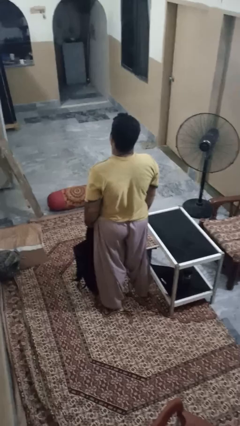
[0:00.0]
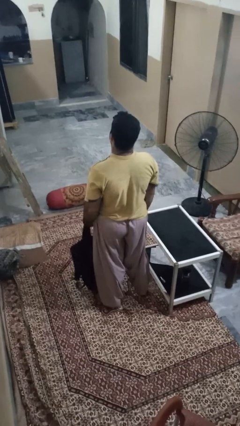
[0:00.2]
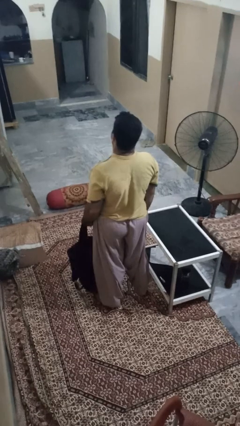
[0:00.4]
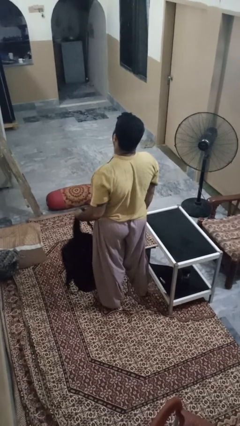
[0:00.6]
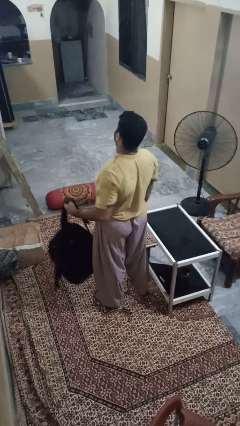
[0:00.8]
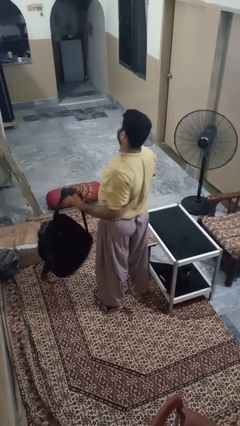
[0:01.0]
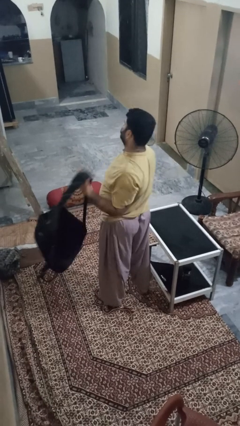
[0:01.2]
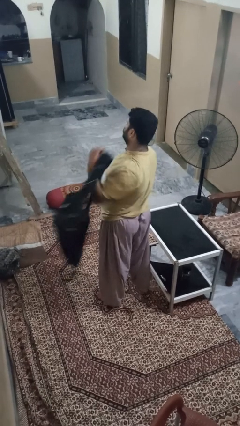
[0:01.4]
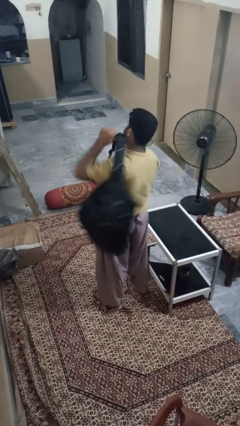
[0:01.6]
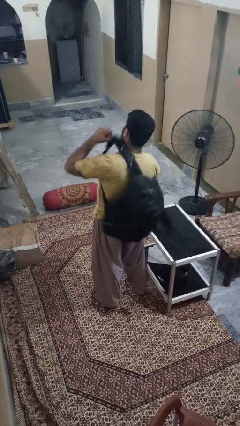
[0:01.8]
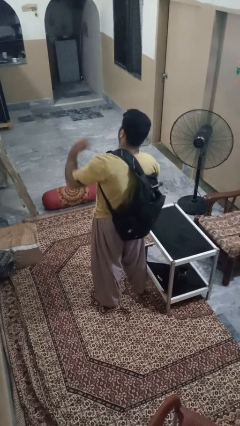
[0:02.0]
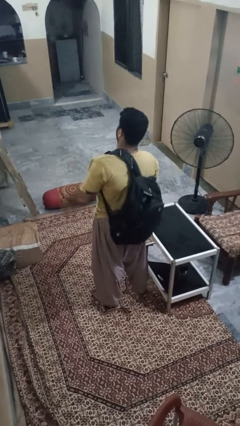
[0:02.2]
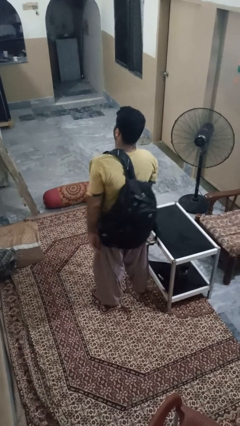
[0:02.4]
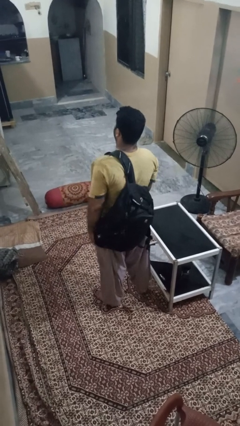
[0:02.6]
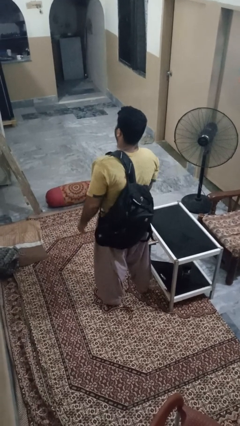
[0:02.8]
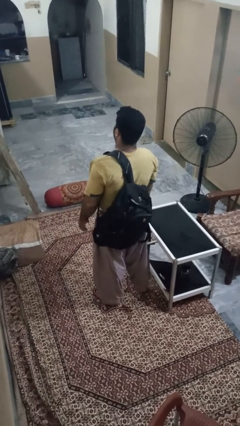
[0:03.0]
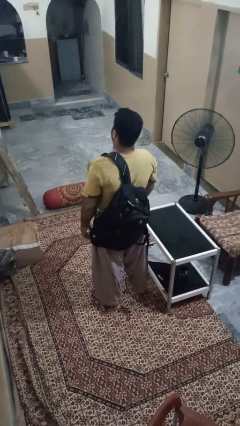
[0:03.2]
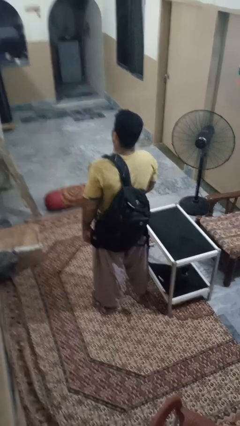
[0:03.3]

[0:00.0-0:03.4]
person puts on backpack

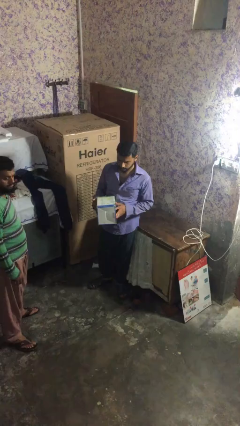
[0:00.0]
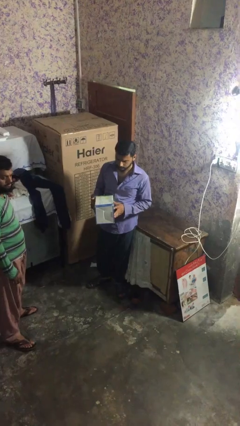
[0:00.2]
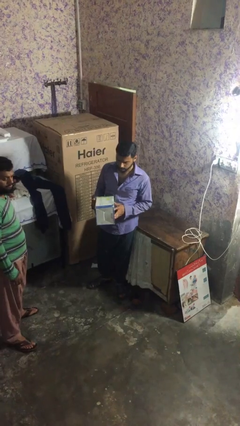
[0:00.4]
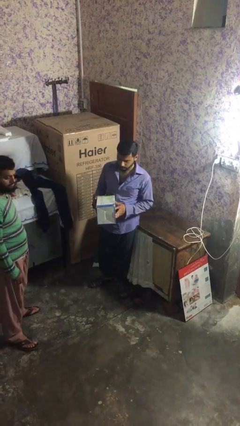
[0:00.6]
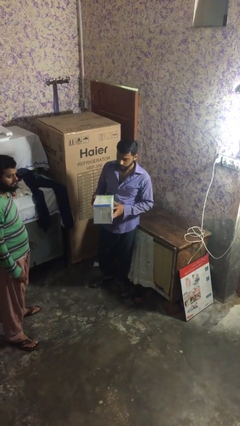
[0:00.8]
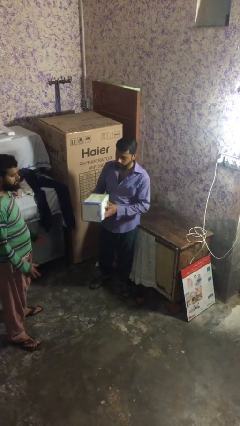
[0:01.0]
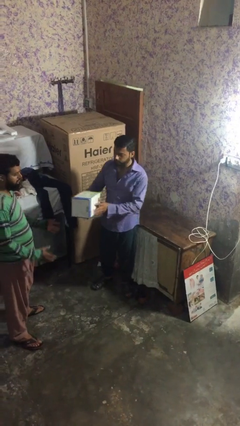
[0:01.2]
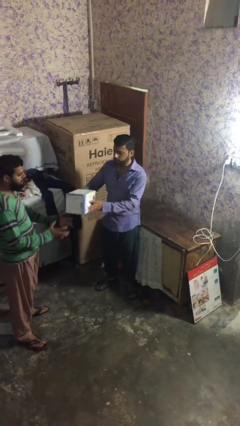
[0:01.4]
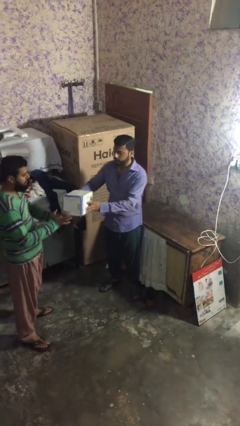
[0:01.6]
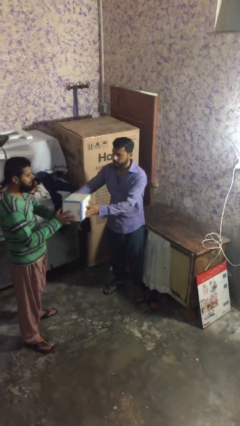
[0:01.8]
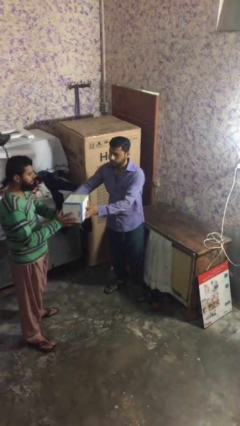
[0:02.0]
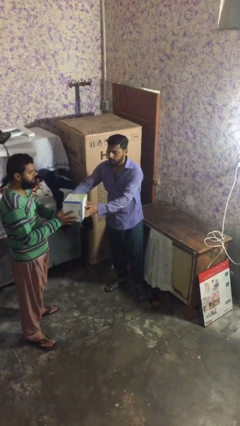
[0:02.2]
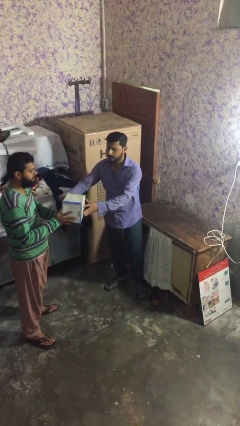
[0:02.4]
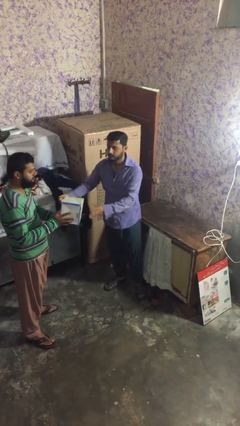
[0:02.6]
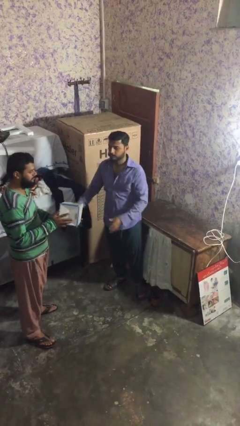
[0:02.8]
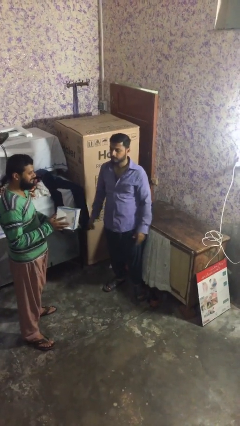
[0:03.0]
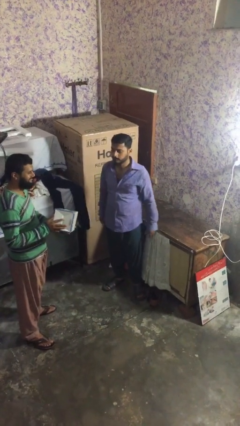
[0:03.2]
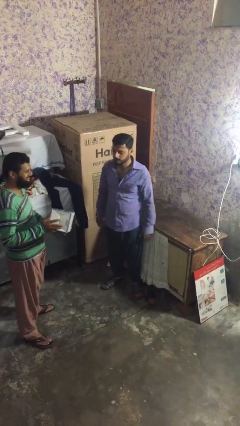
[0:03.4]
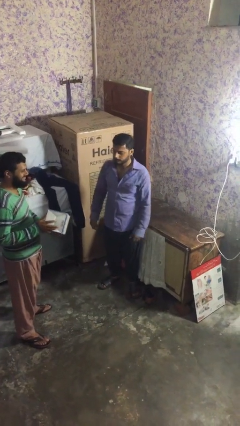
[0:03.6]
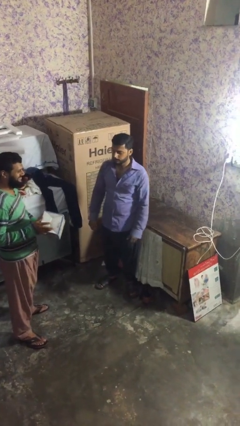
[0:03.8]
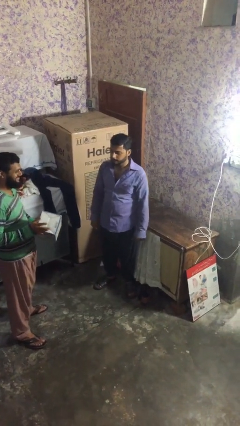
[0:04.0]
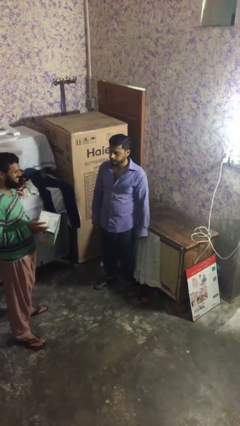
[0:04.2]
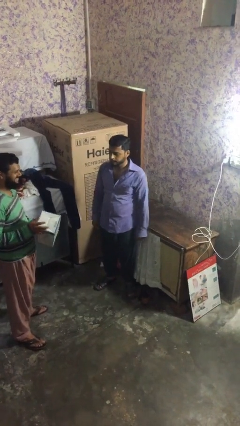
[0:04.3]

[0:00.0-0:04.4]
person transfers object to person

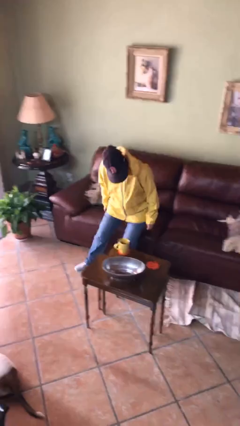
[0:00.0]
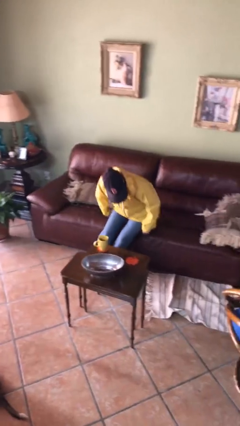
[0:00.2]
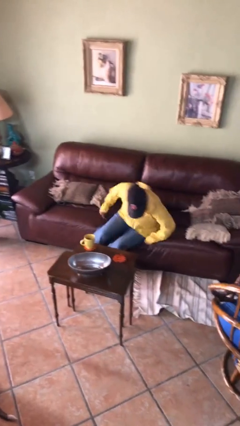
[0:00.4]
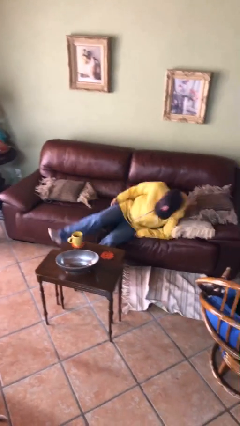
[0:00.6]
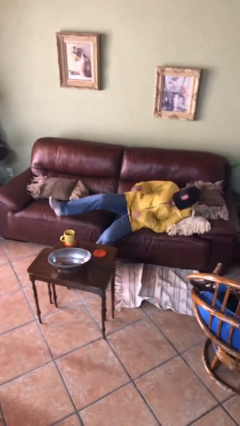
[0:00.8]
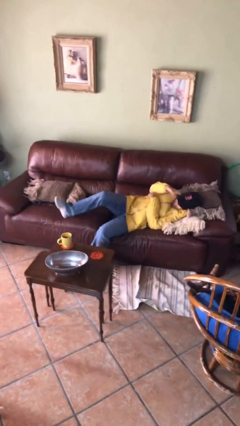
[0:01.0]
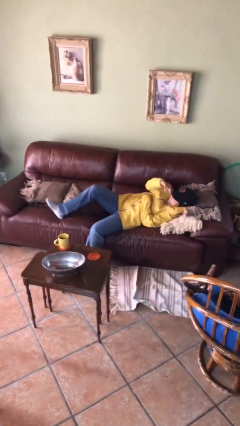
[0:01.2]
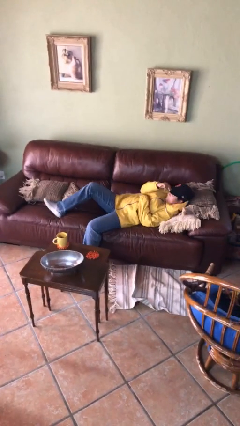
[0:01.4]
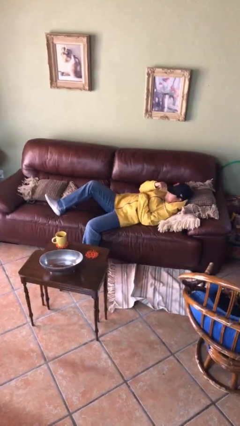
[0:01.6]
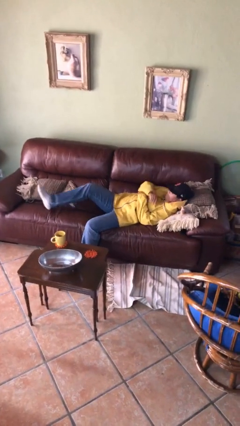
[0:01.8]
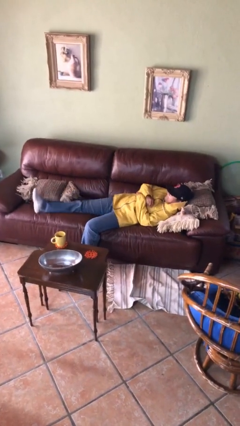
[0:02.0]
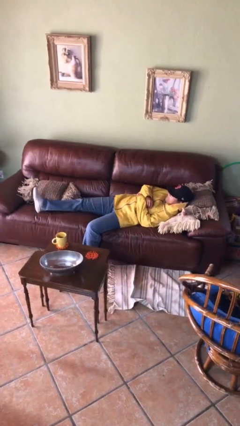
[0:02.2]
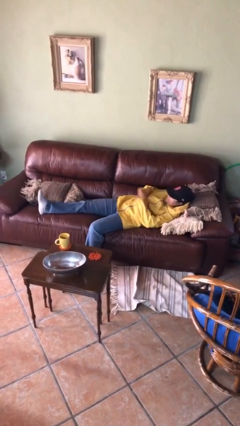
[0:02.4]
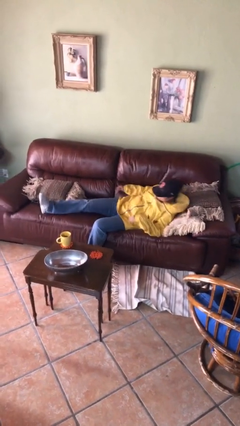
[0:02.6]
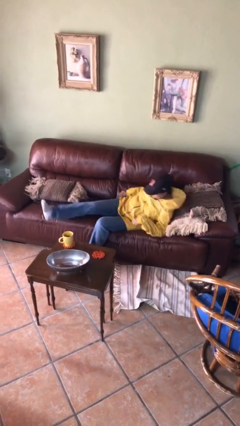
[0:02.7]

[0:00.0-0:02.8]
person lies down on couch

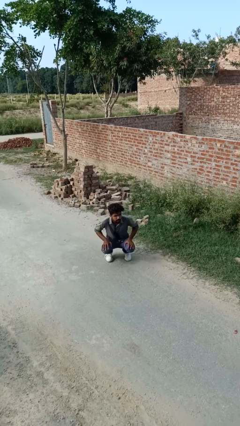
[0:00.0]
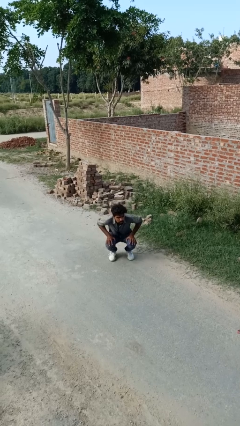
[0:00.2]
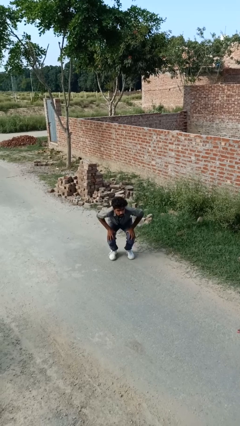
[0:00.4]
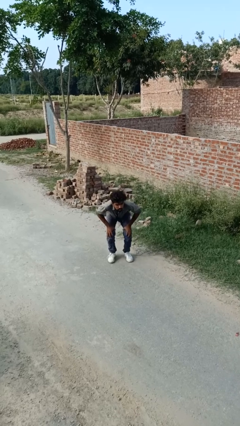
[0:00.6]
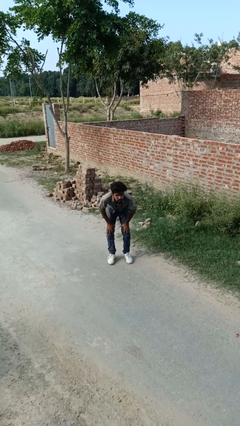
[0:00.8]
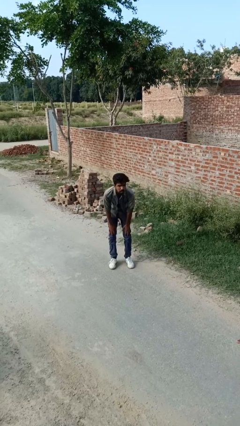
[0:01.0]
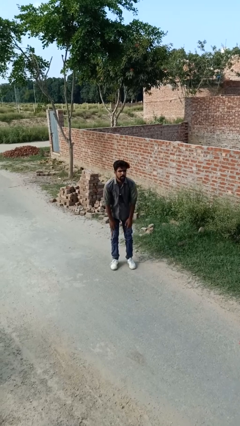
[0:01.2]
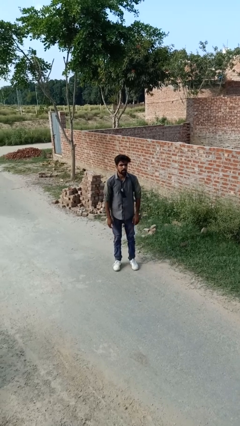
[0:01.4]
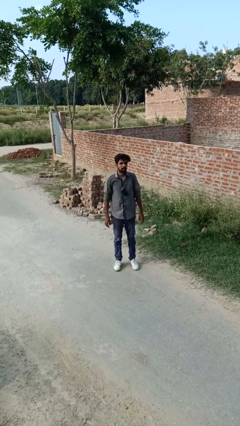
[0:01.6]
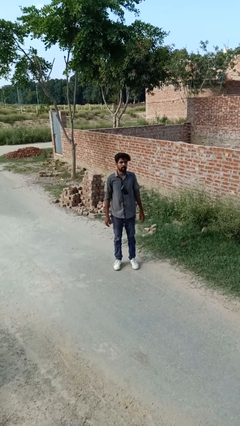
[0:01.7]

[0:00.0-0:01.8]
person stands up from floor

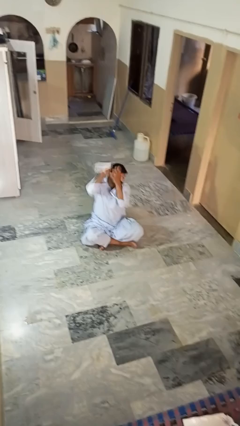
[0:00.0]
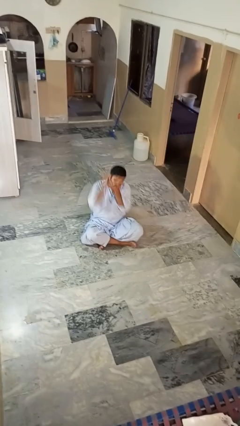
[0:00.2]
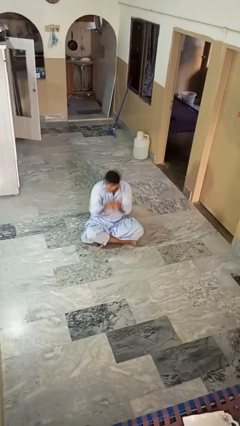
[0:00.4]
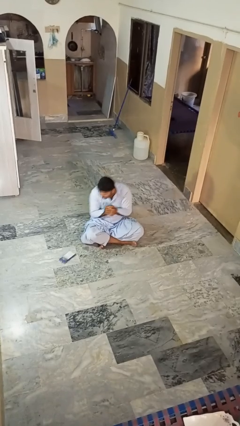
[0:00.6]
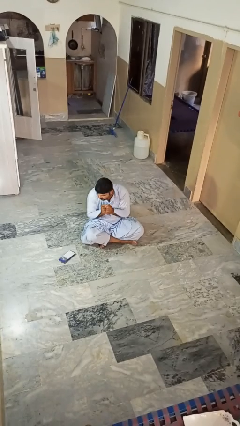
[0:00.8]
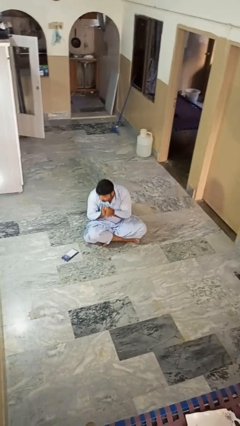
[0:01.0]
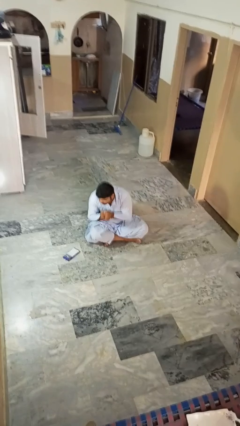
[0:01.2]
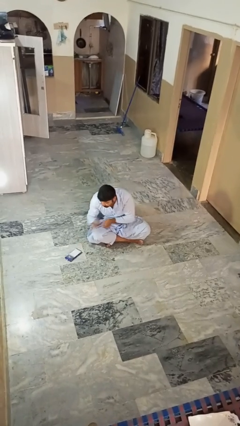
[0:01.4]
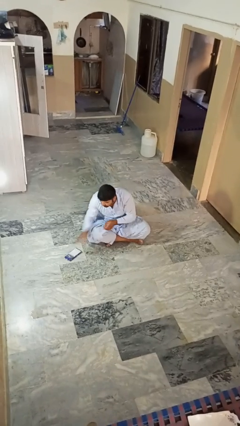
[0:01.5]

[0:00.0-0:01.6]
person catches dropped object

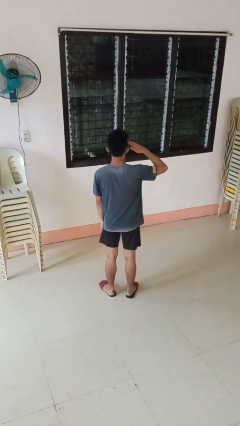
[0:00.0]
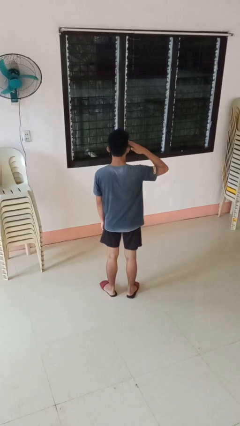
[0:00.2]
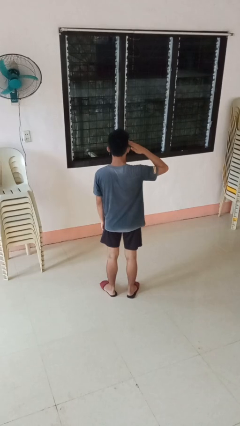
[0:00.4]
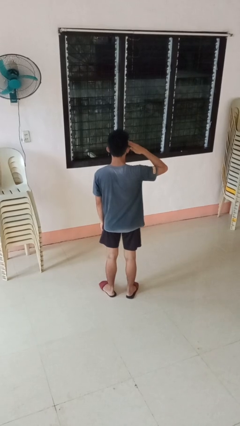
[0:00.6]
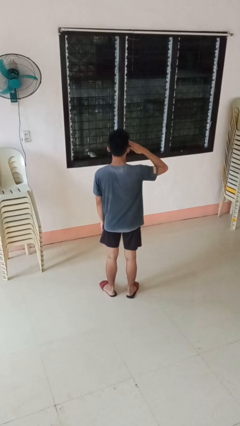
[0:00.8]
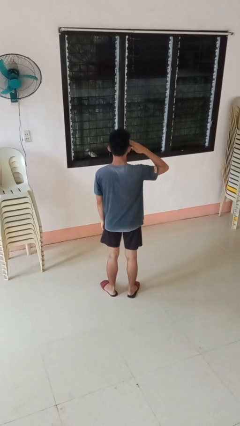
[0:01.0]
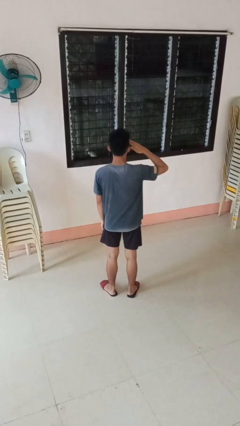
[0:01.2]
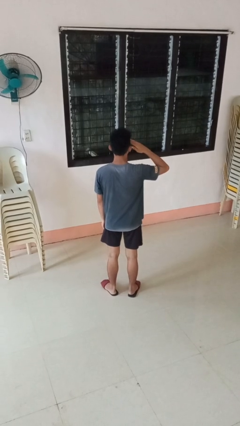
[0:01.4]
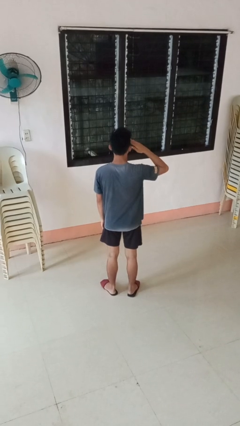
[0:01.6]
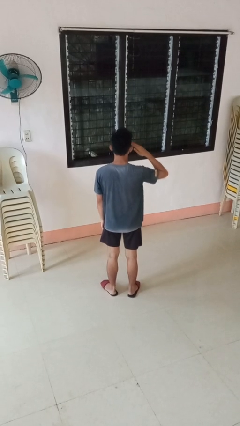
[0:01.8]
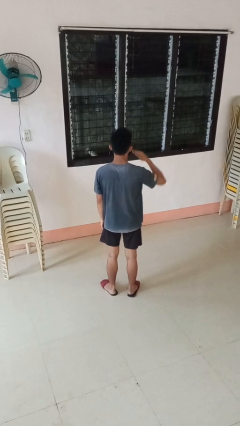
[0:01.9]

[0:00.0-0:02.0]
person salutes

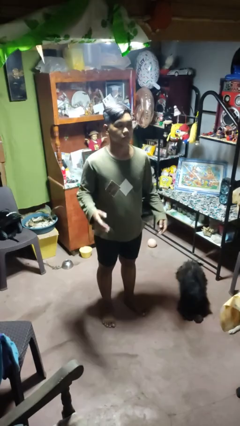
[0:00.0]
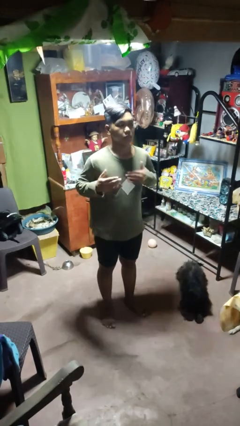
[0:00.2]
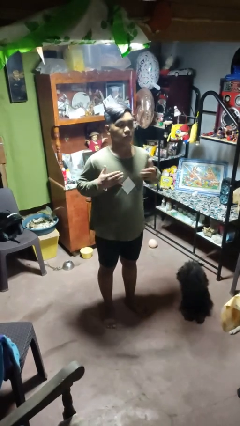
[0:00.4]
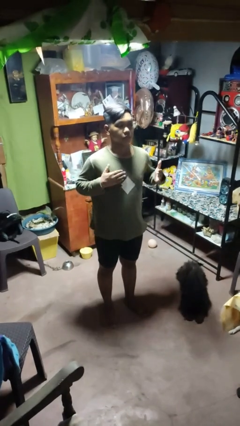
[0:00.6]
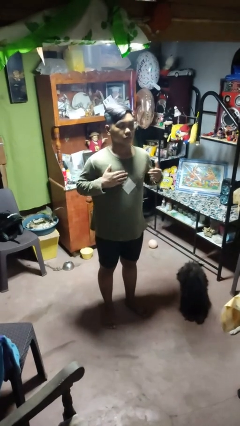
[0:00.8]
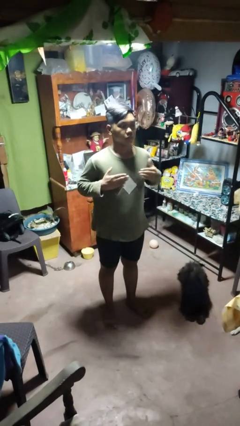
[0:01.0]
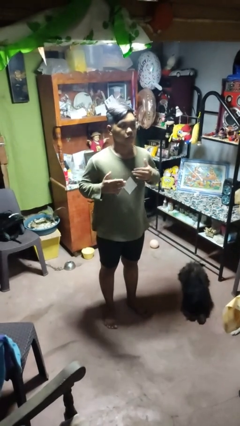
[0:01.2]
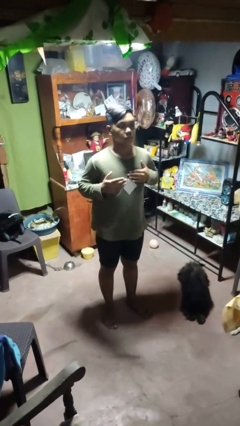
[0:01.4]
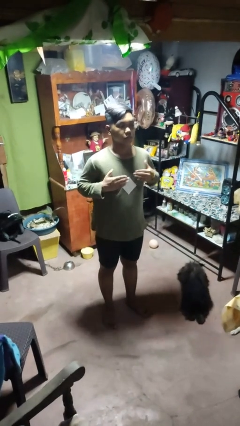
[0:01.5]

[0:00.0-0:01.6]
person drums on chest
